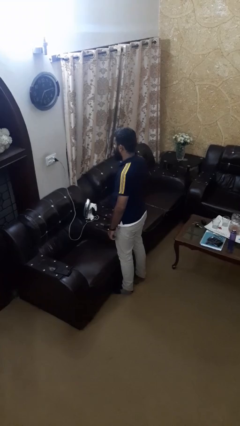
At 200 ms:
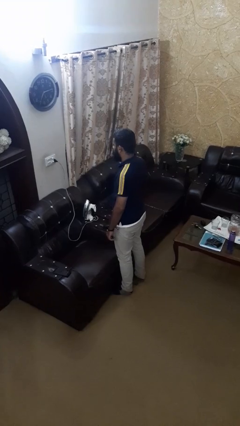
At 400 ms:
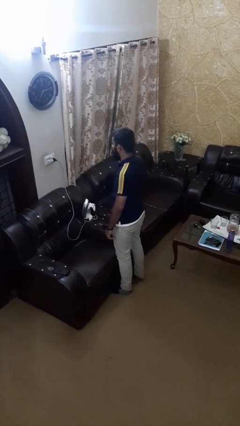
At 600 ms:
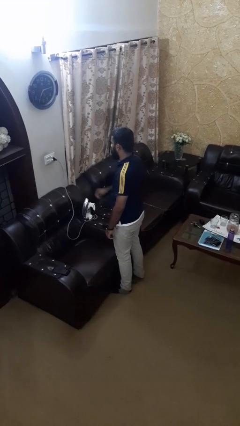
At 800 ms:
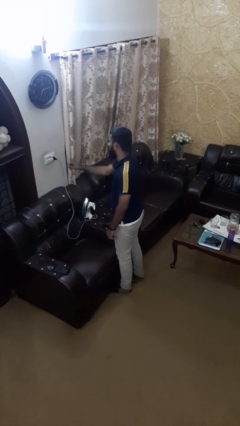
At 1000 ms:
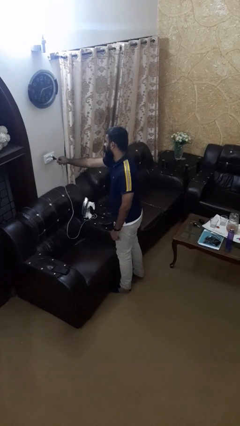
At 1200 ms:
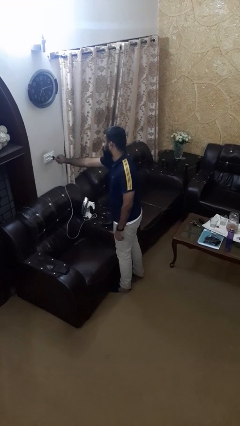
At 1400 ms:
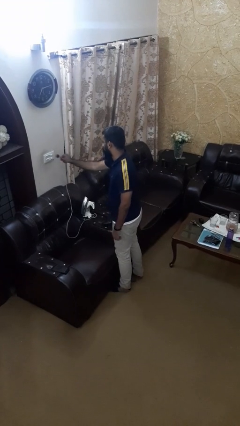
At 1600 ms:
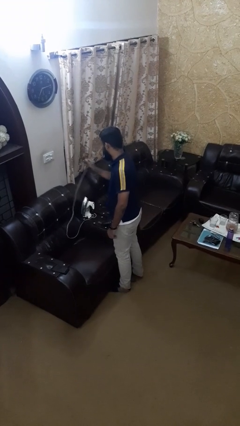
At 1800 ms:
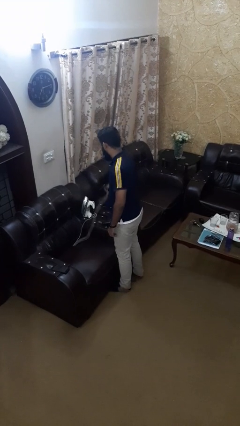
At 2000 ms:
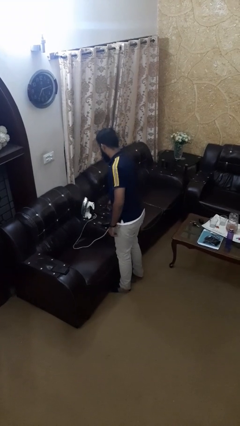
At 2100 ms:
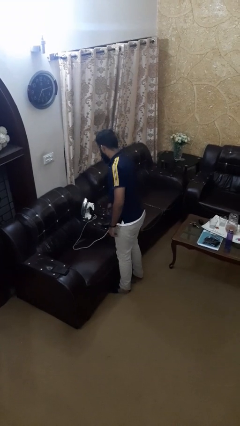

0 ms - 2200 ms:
person unplugs from electrical socket

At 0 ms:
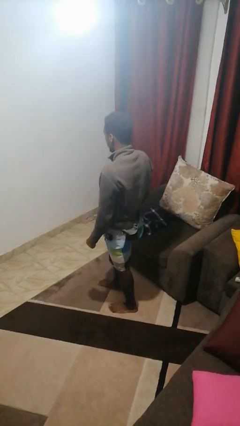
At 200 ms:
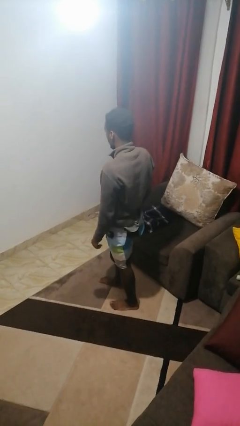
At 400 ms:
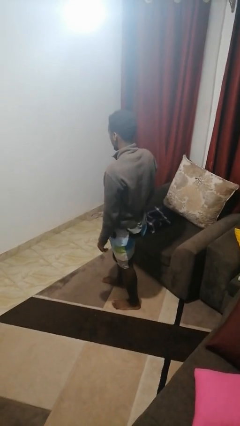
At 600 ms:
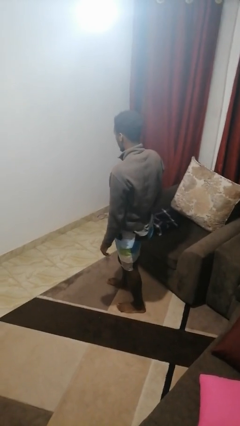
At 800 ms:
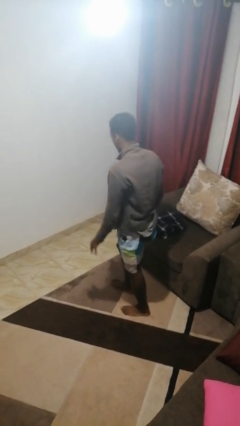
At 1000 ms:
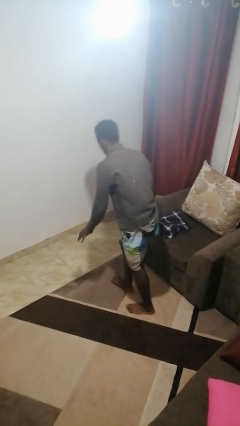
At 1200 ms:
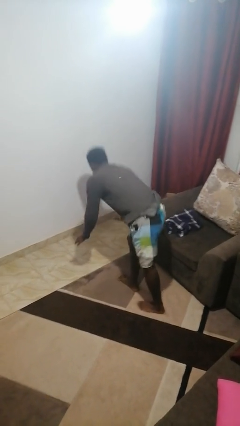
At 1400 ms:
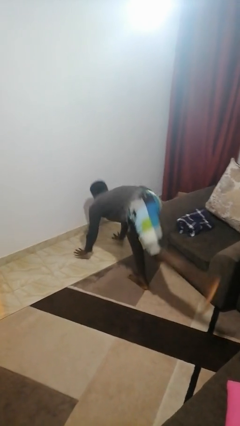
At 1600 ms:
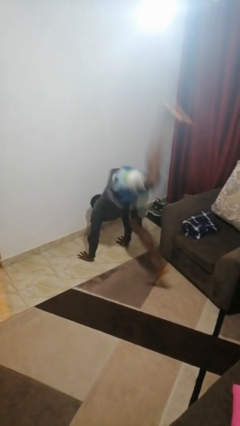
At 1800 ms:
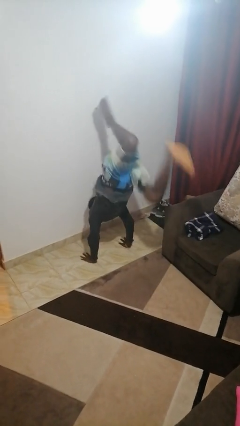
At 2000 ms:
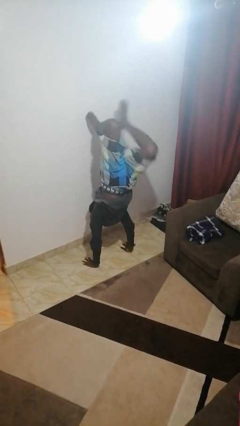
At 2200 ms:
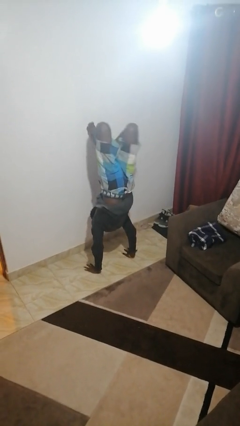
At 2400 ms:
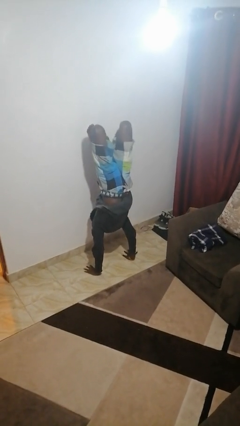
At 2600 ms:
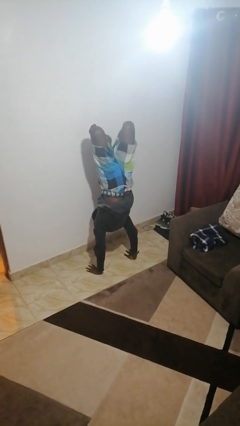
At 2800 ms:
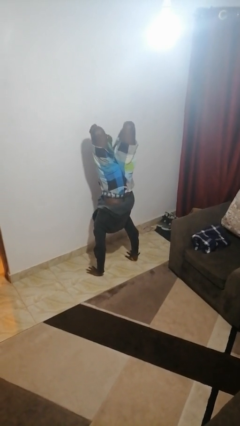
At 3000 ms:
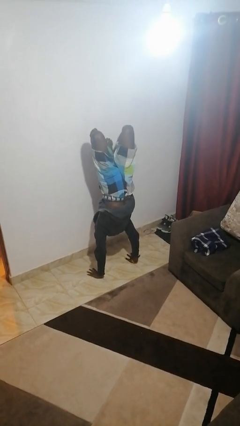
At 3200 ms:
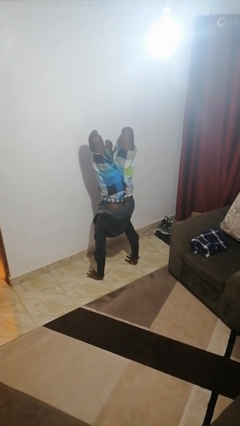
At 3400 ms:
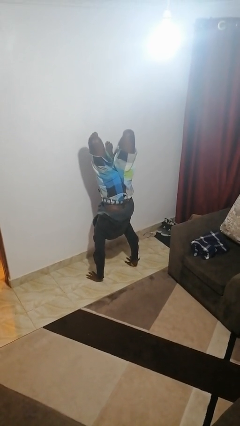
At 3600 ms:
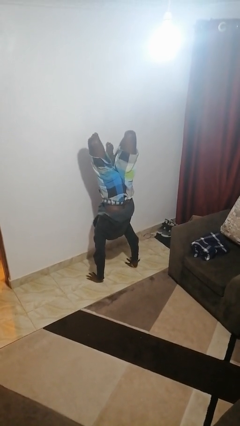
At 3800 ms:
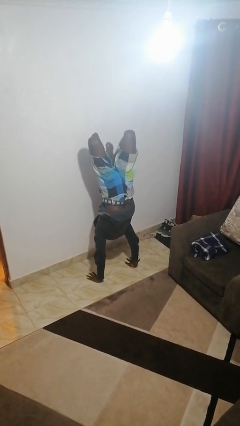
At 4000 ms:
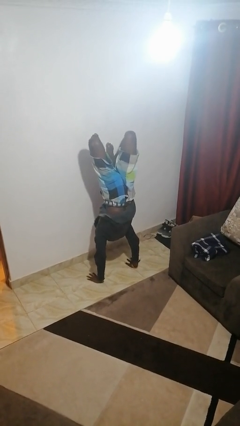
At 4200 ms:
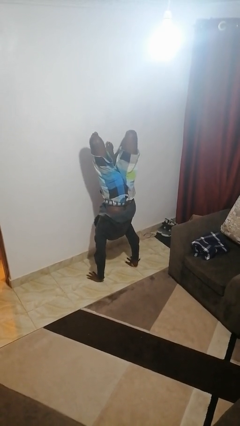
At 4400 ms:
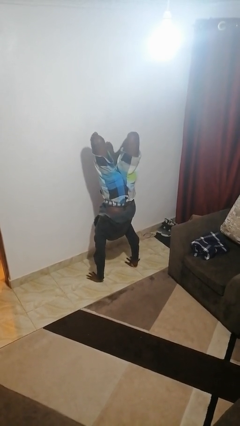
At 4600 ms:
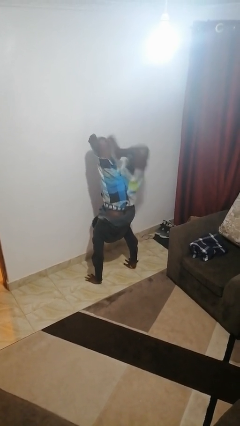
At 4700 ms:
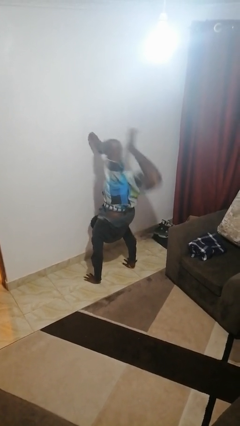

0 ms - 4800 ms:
person handstand

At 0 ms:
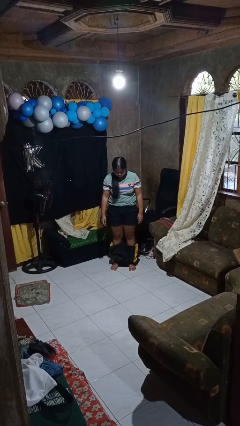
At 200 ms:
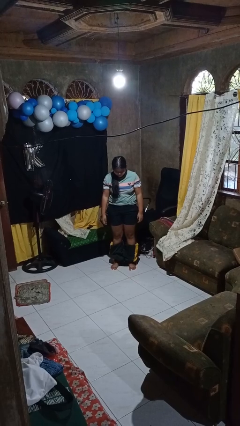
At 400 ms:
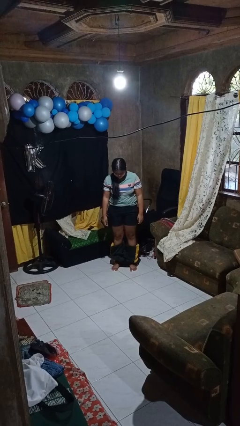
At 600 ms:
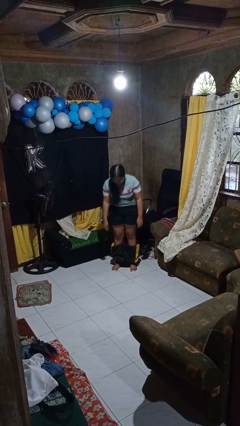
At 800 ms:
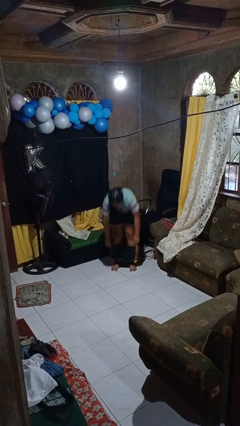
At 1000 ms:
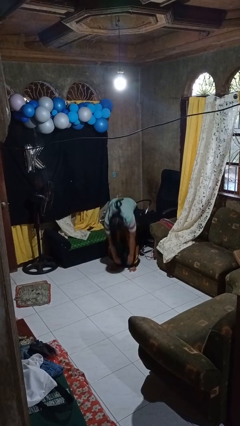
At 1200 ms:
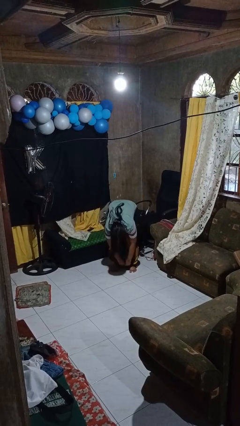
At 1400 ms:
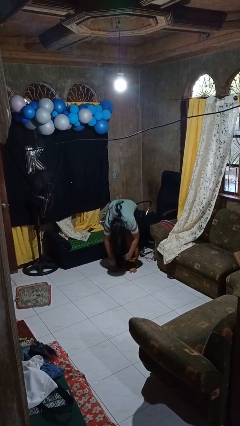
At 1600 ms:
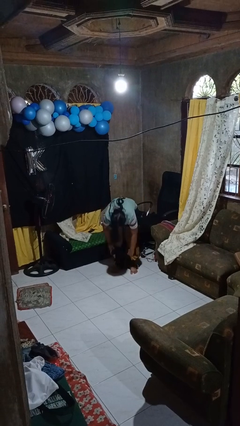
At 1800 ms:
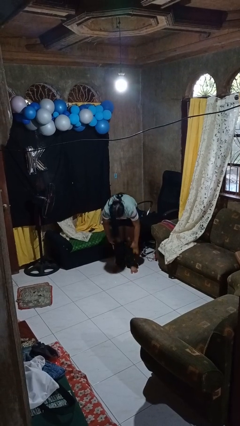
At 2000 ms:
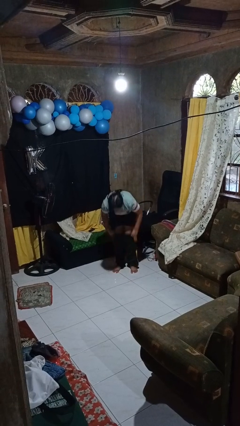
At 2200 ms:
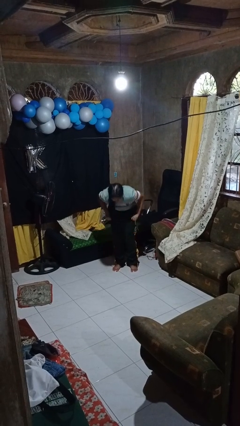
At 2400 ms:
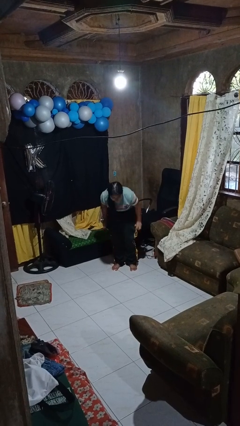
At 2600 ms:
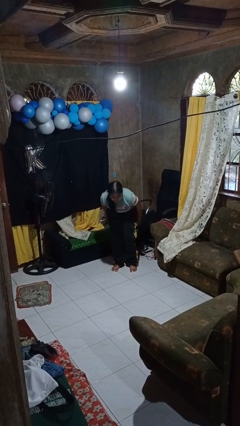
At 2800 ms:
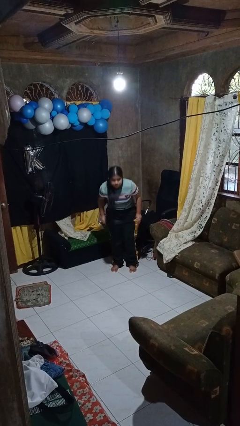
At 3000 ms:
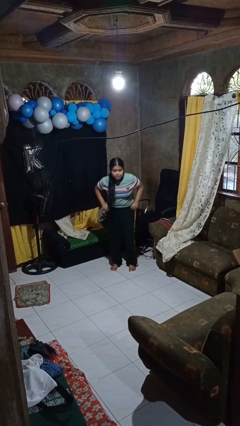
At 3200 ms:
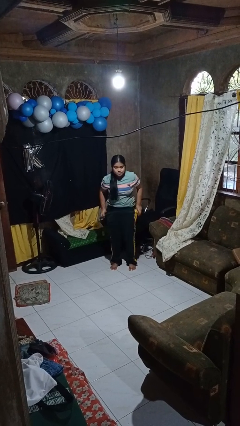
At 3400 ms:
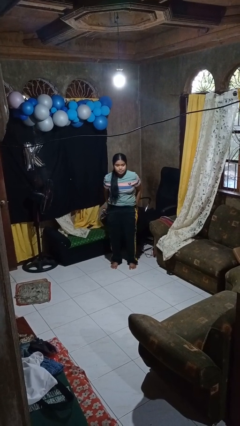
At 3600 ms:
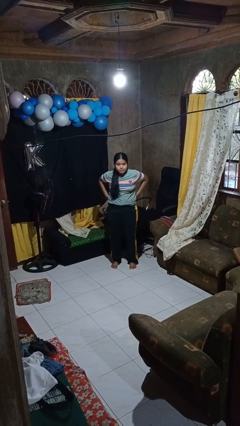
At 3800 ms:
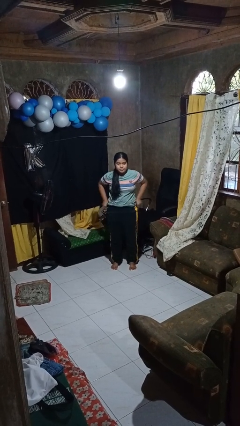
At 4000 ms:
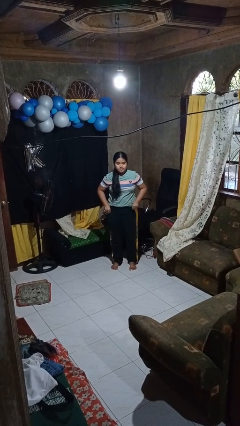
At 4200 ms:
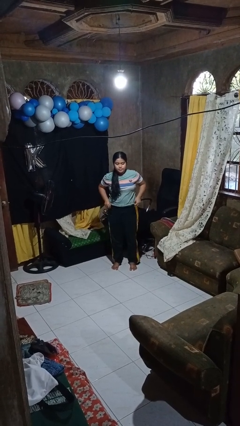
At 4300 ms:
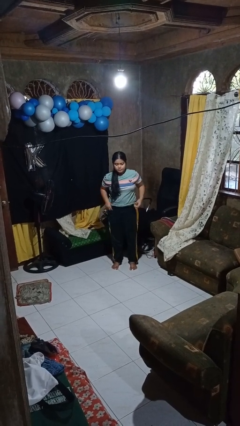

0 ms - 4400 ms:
person puts on pants

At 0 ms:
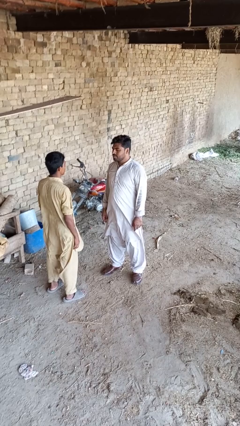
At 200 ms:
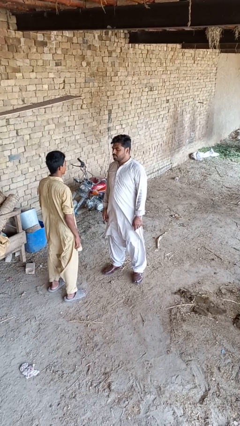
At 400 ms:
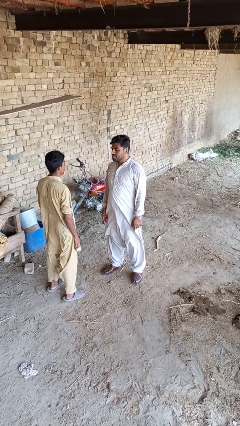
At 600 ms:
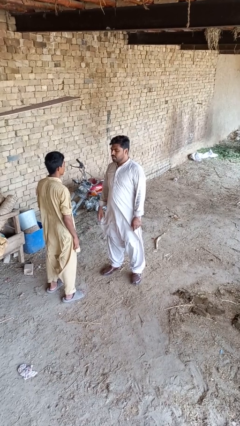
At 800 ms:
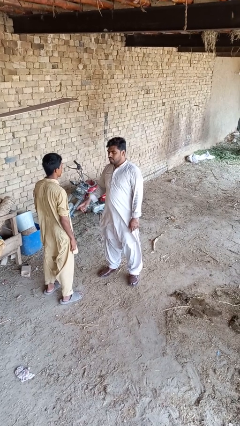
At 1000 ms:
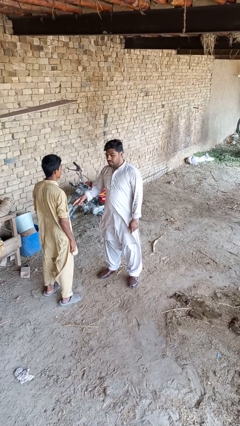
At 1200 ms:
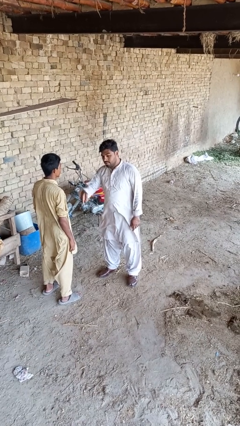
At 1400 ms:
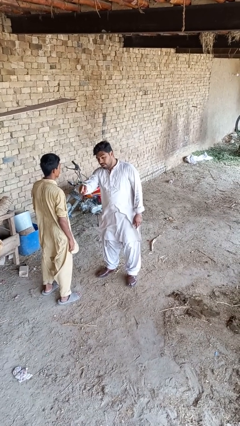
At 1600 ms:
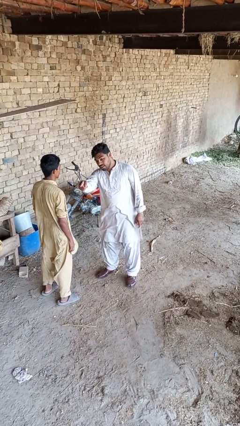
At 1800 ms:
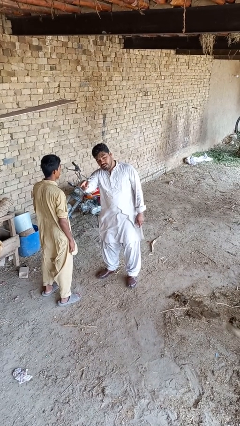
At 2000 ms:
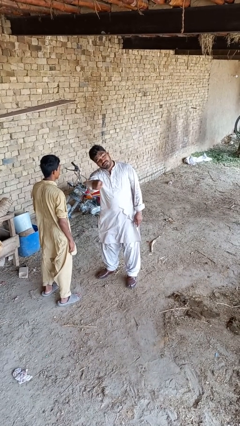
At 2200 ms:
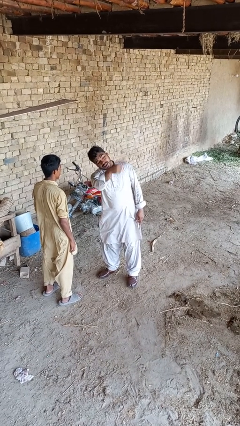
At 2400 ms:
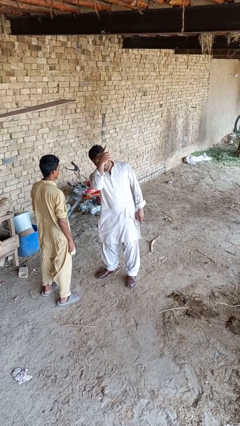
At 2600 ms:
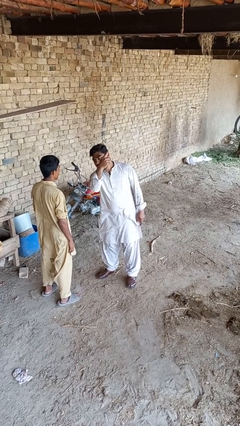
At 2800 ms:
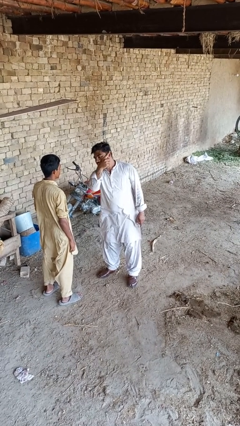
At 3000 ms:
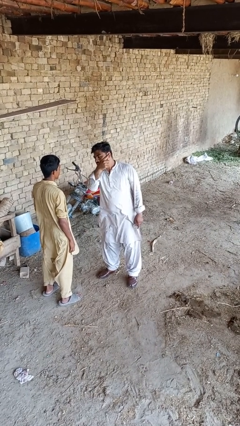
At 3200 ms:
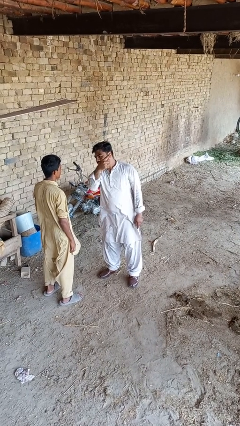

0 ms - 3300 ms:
person shoves person

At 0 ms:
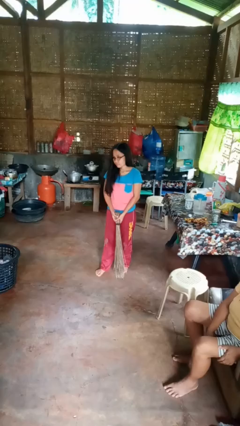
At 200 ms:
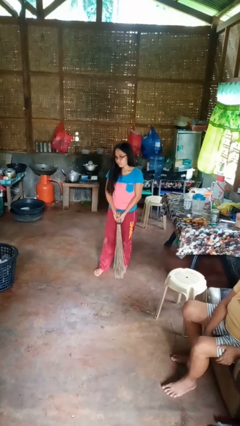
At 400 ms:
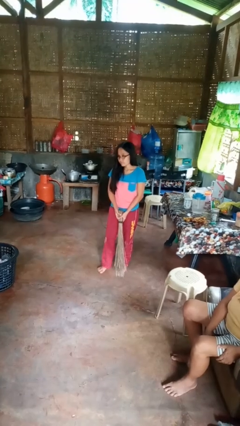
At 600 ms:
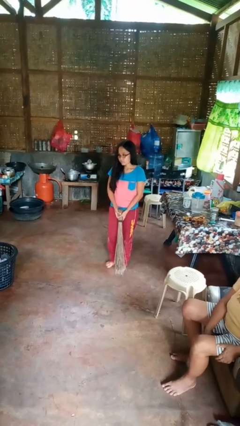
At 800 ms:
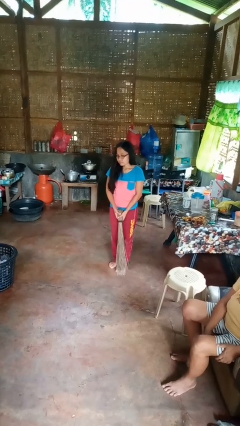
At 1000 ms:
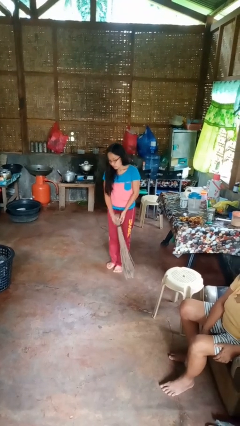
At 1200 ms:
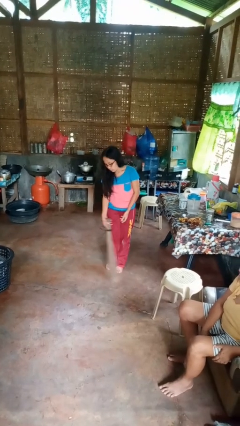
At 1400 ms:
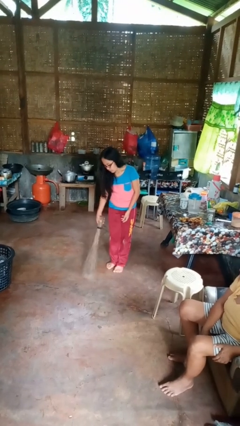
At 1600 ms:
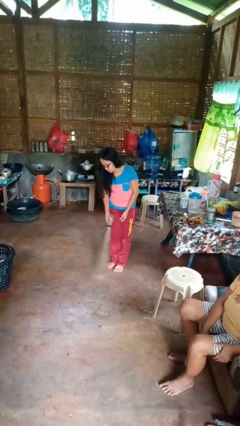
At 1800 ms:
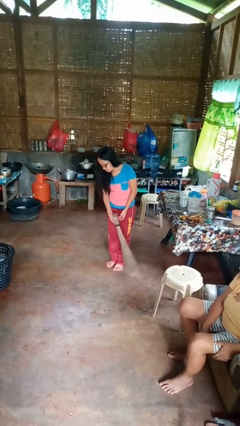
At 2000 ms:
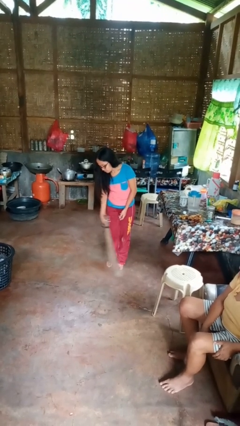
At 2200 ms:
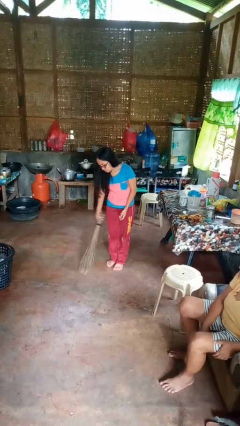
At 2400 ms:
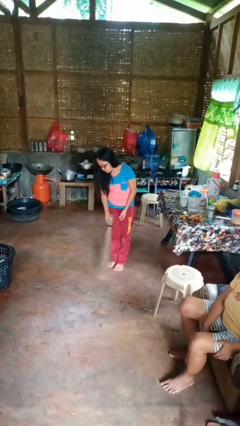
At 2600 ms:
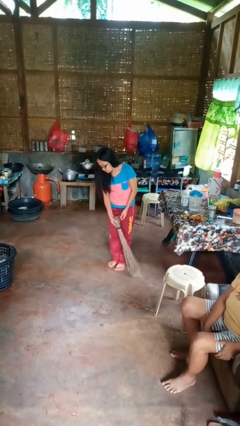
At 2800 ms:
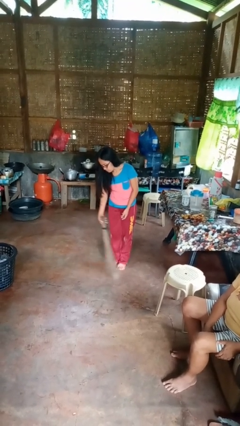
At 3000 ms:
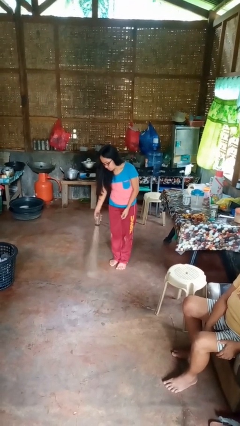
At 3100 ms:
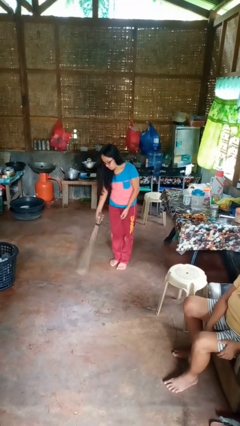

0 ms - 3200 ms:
person sweeps floor
